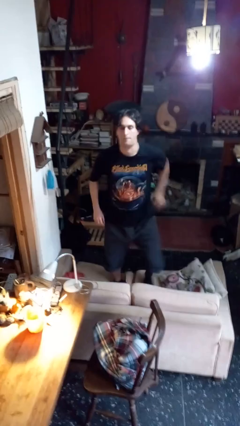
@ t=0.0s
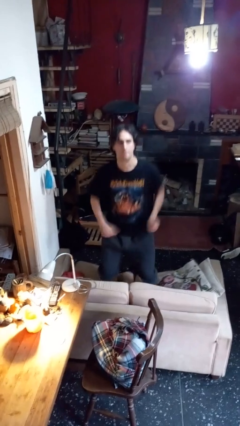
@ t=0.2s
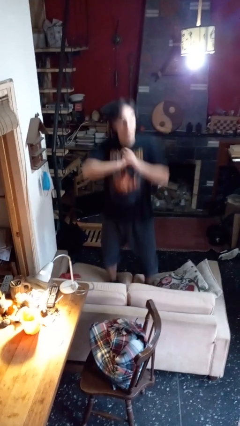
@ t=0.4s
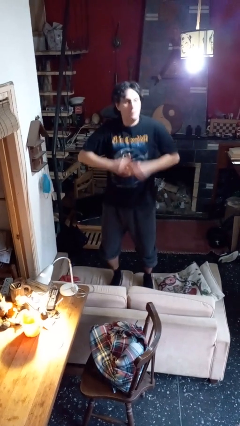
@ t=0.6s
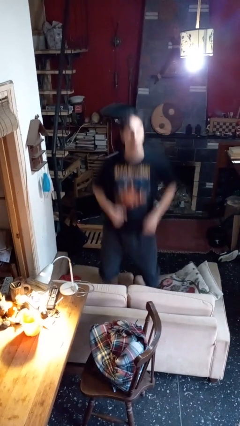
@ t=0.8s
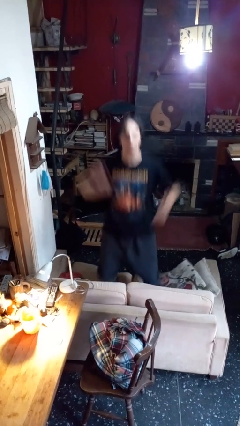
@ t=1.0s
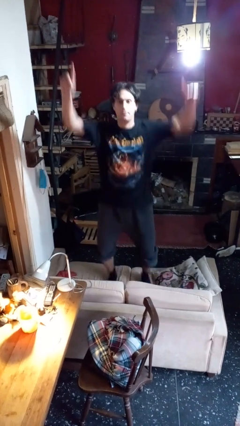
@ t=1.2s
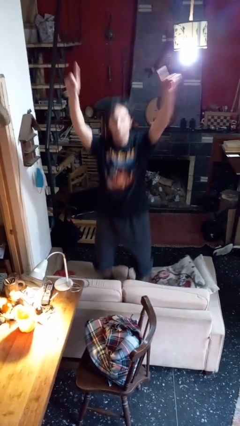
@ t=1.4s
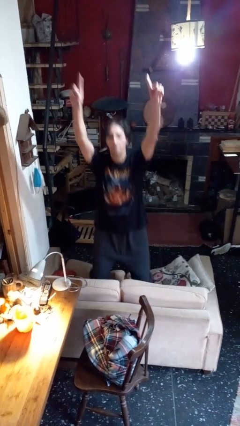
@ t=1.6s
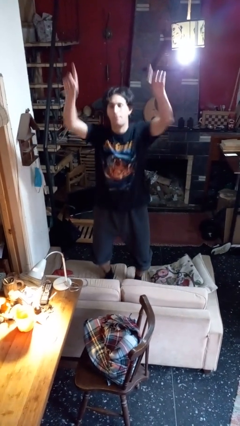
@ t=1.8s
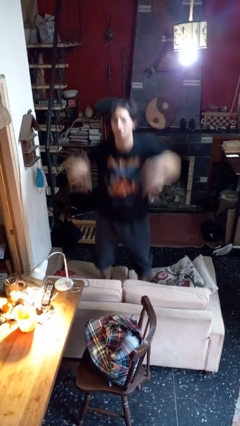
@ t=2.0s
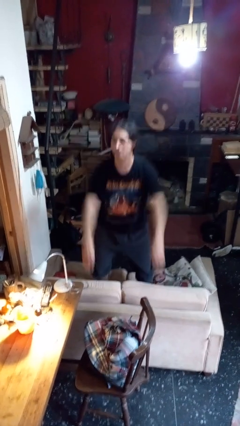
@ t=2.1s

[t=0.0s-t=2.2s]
person jumps on couch

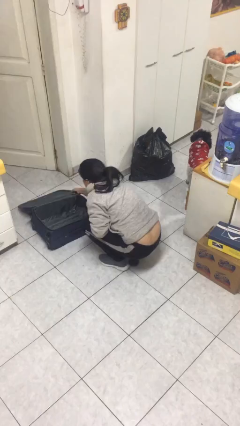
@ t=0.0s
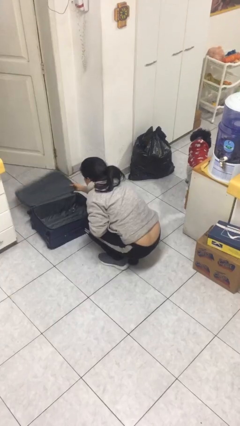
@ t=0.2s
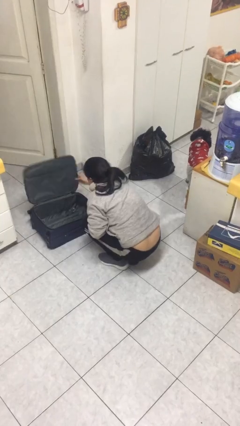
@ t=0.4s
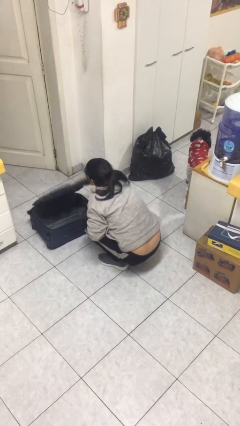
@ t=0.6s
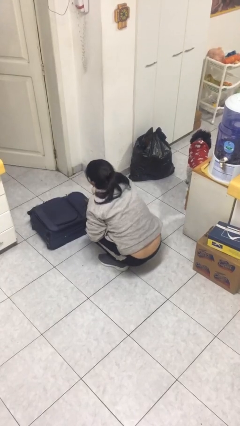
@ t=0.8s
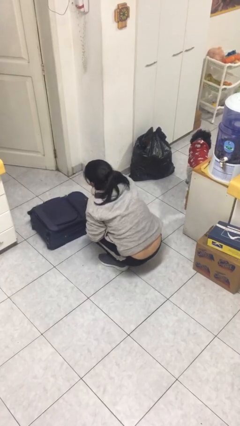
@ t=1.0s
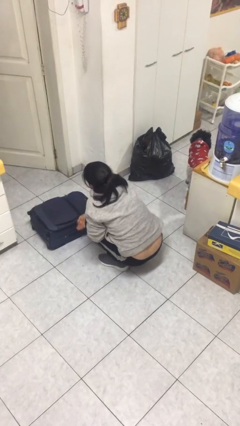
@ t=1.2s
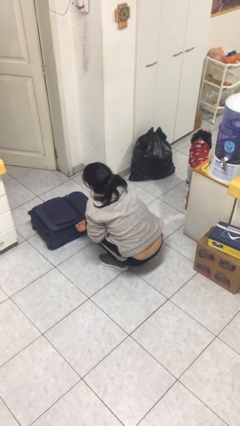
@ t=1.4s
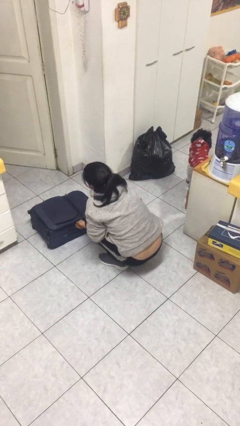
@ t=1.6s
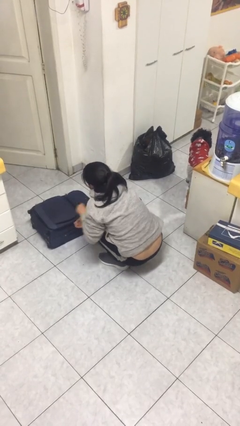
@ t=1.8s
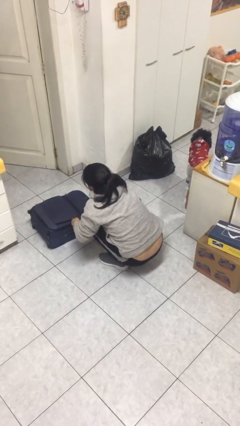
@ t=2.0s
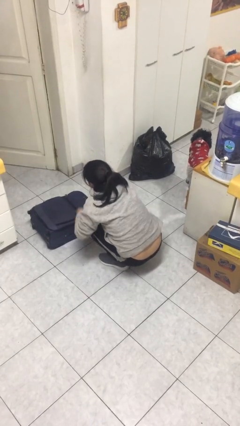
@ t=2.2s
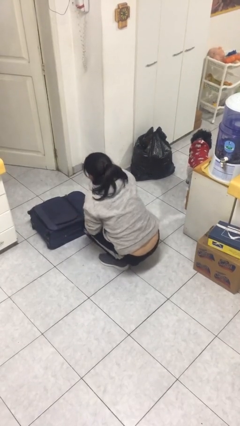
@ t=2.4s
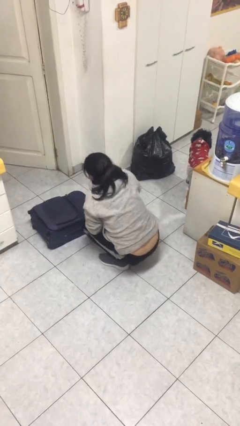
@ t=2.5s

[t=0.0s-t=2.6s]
person closes suitcase

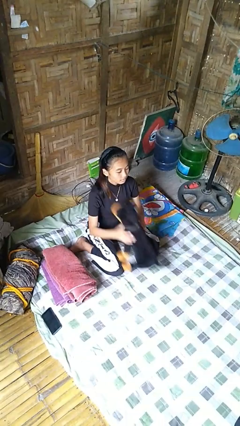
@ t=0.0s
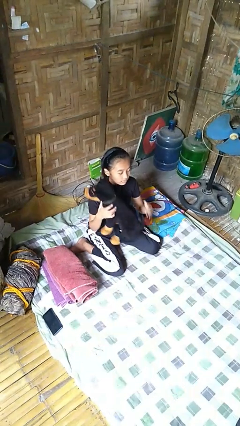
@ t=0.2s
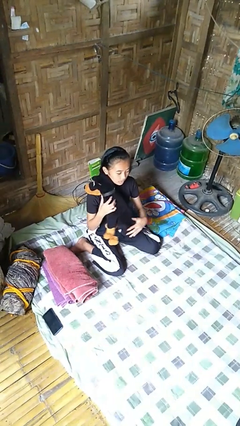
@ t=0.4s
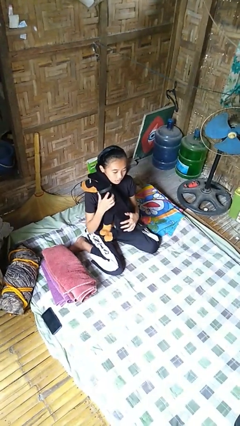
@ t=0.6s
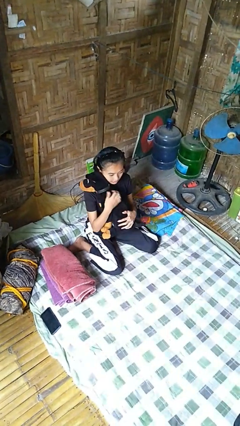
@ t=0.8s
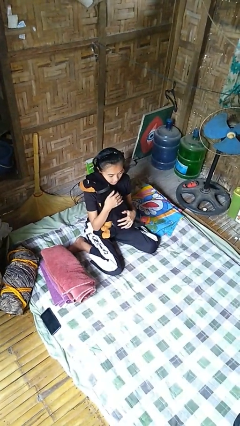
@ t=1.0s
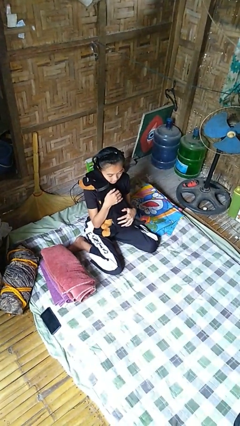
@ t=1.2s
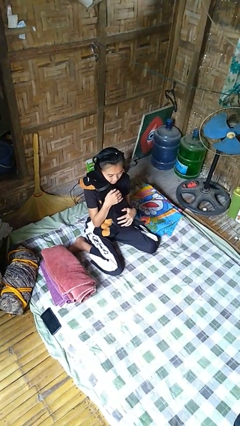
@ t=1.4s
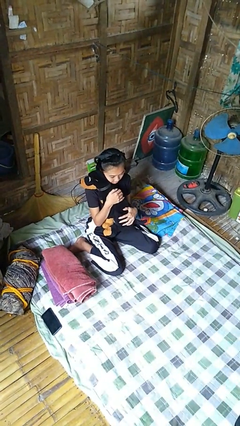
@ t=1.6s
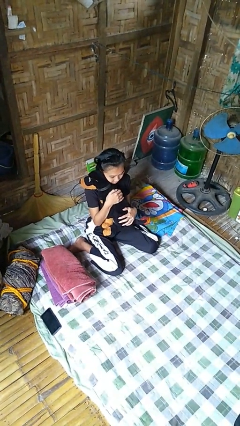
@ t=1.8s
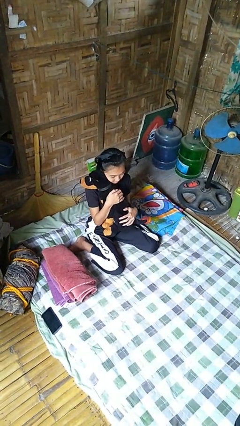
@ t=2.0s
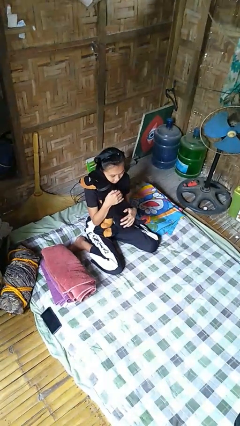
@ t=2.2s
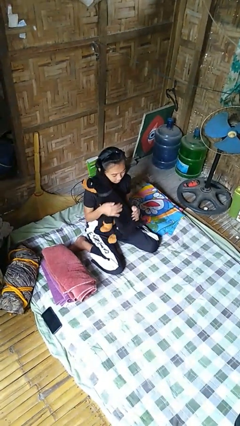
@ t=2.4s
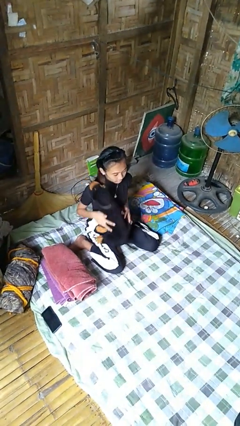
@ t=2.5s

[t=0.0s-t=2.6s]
person hugs stuffed animal

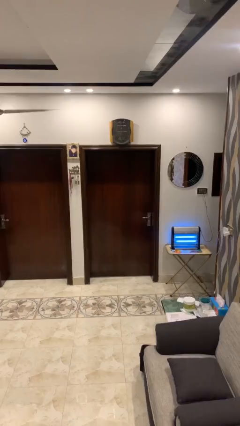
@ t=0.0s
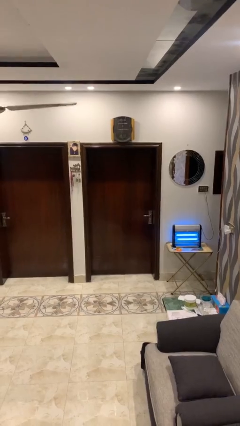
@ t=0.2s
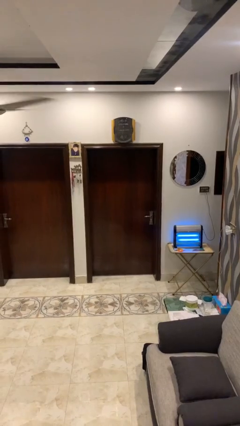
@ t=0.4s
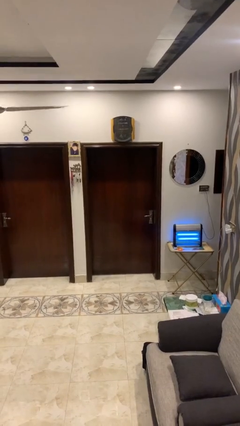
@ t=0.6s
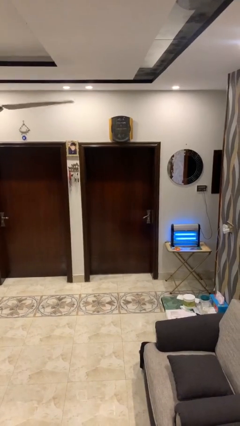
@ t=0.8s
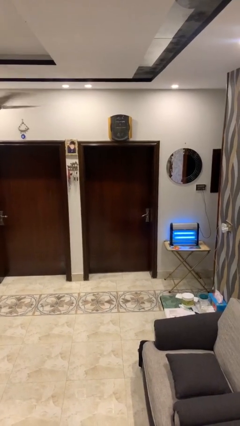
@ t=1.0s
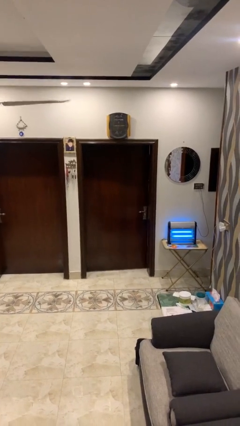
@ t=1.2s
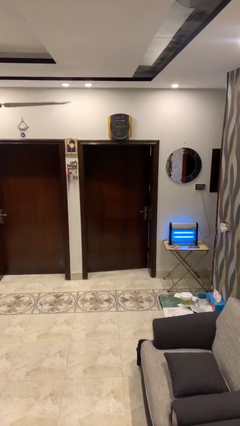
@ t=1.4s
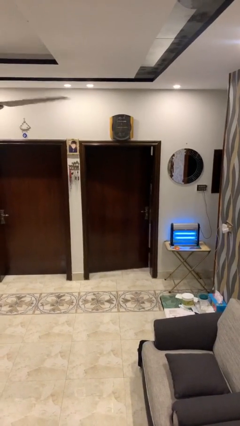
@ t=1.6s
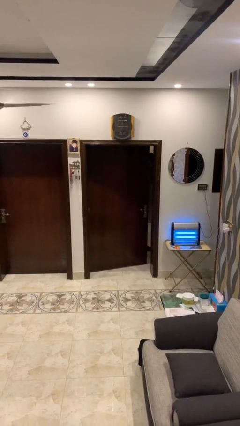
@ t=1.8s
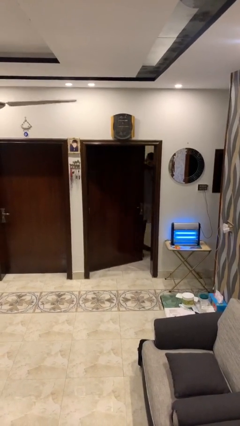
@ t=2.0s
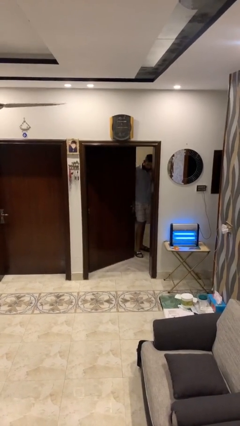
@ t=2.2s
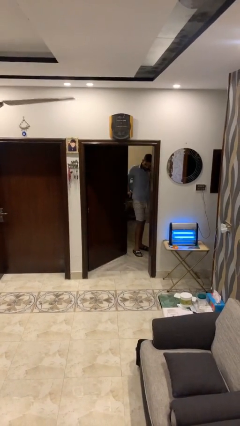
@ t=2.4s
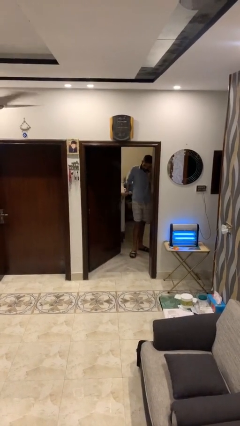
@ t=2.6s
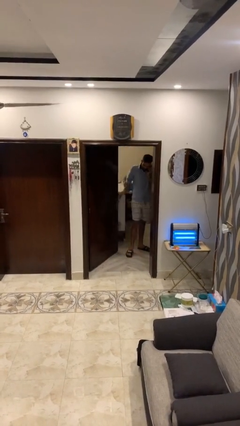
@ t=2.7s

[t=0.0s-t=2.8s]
person opens facility door

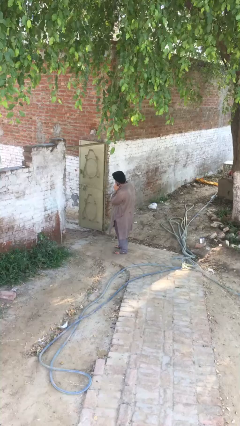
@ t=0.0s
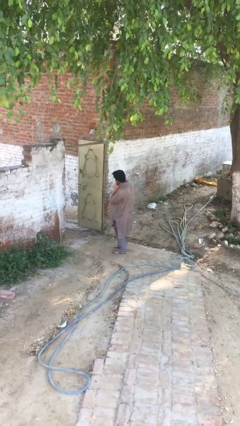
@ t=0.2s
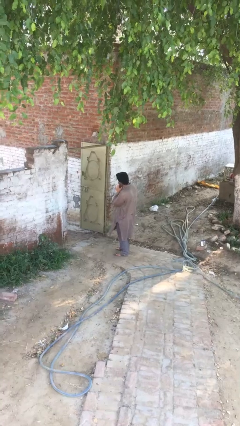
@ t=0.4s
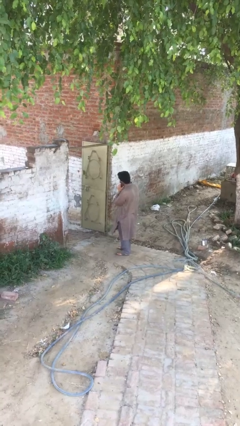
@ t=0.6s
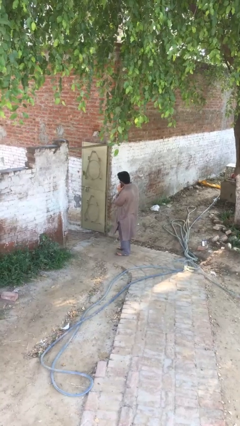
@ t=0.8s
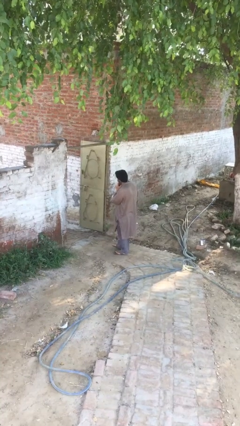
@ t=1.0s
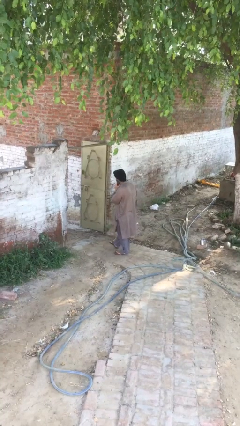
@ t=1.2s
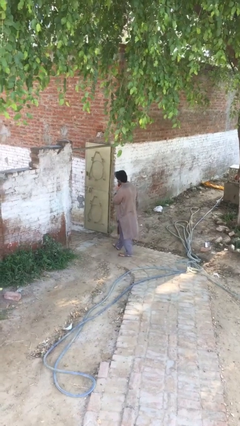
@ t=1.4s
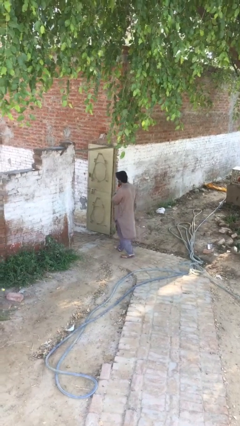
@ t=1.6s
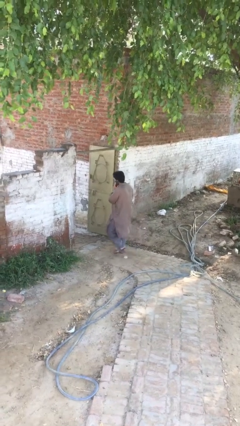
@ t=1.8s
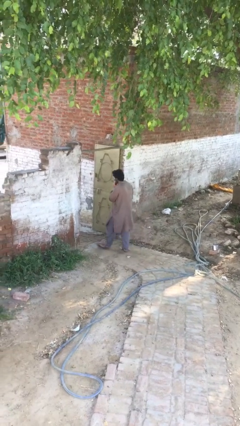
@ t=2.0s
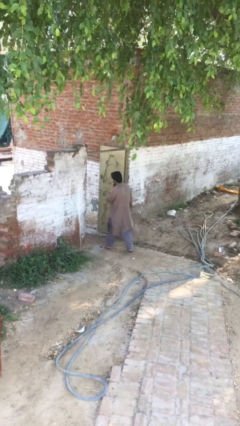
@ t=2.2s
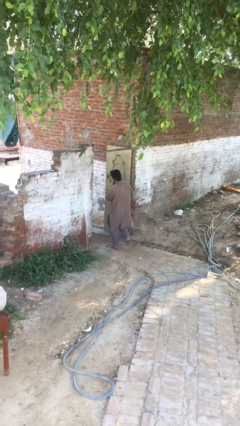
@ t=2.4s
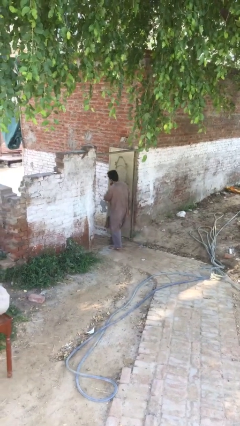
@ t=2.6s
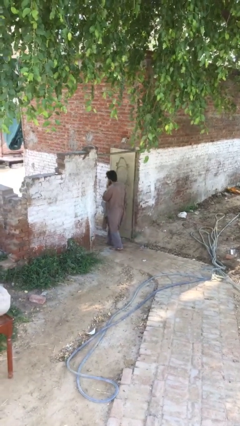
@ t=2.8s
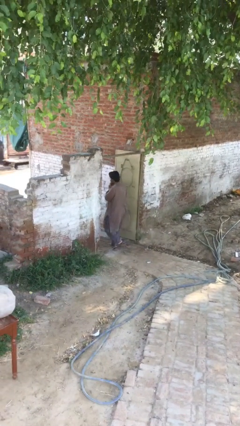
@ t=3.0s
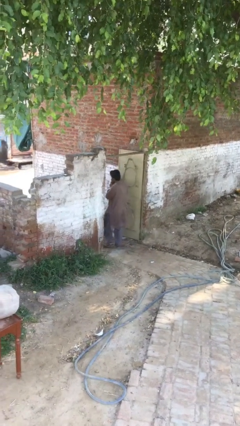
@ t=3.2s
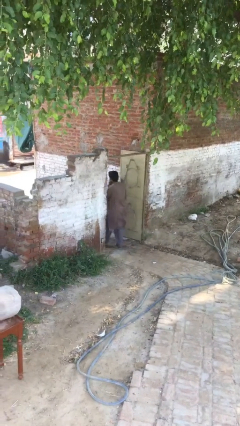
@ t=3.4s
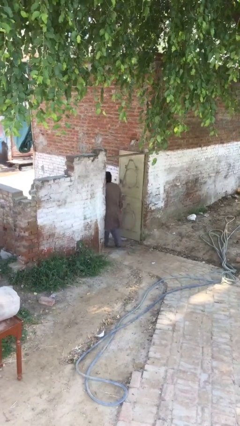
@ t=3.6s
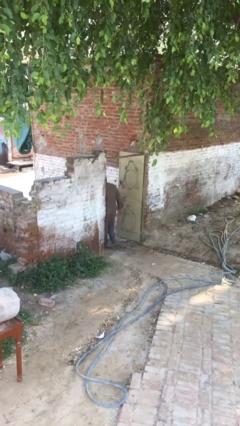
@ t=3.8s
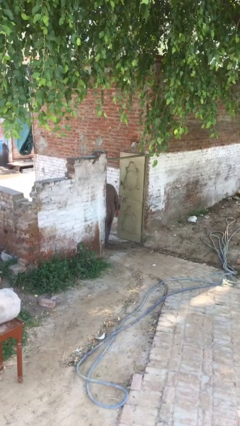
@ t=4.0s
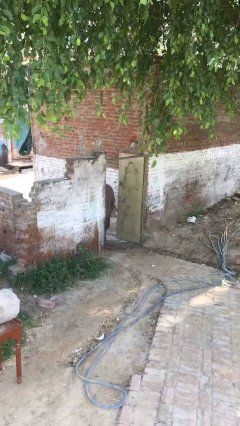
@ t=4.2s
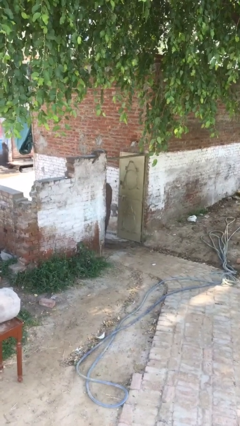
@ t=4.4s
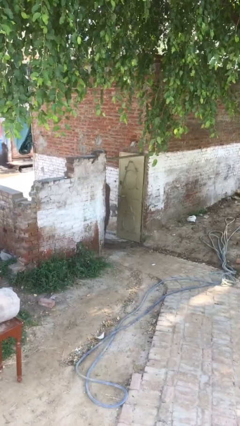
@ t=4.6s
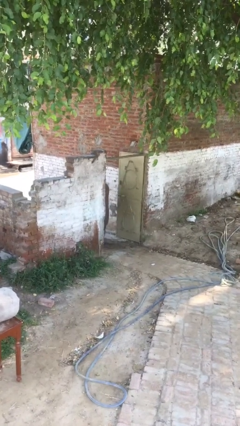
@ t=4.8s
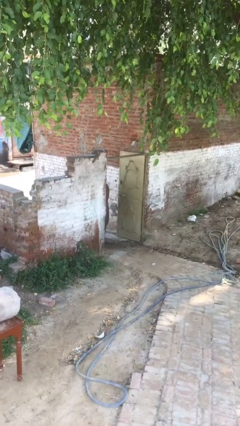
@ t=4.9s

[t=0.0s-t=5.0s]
person exits scene through structure

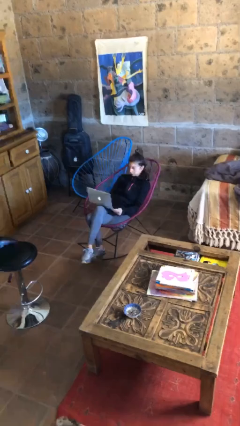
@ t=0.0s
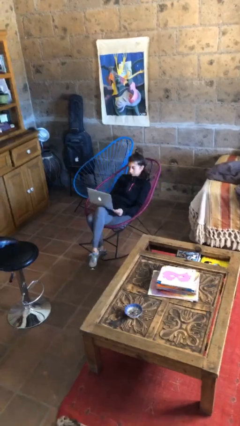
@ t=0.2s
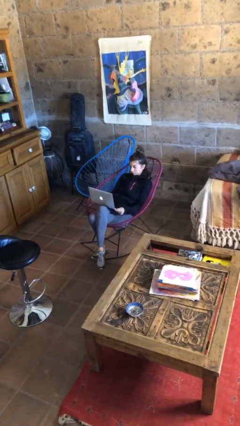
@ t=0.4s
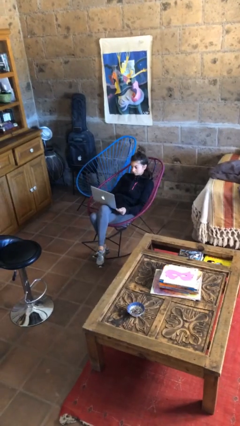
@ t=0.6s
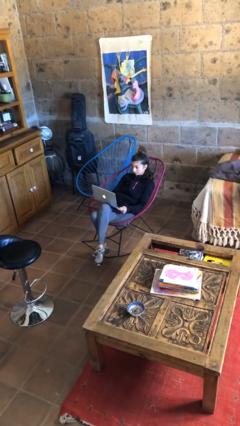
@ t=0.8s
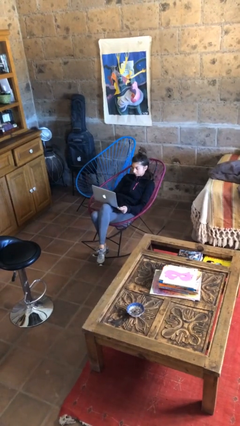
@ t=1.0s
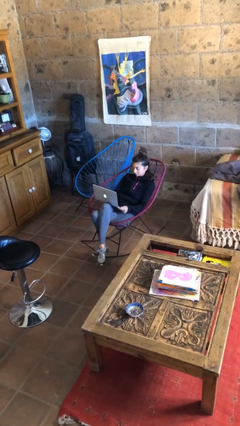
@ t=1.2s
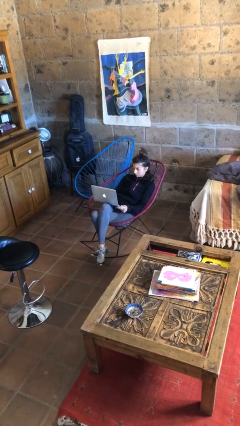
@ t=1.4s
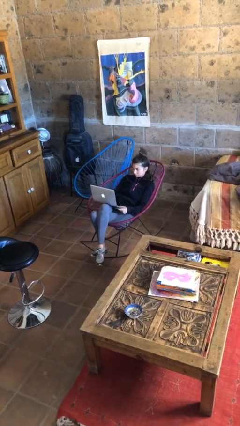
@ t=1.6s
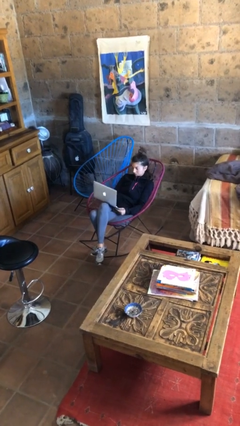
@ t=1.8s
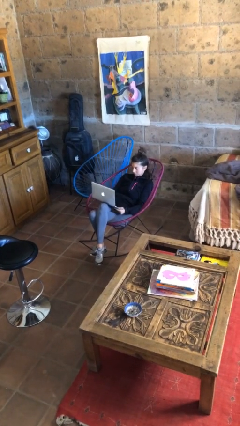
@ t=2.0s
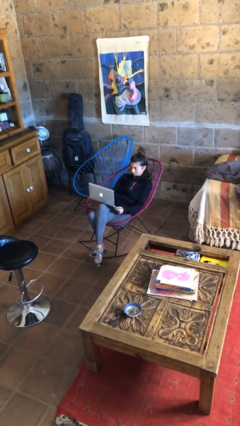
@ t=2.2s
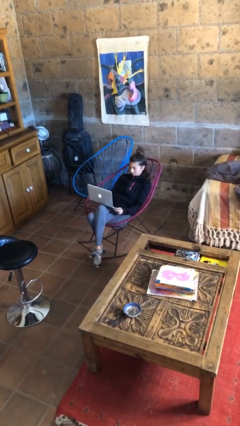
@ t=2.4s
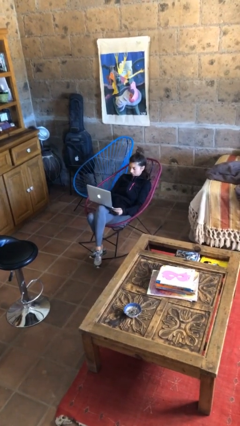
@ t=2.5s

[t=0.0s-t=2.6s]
person interacts with laptop
